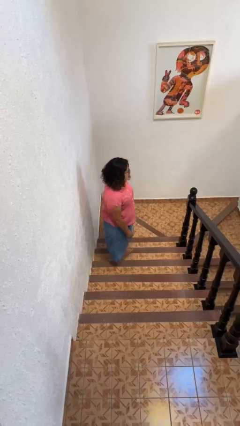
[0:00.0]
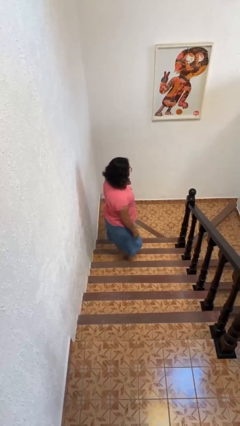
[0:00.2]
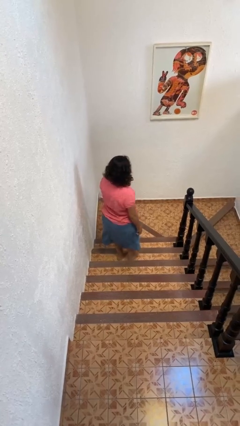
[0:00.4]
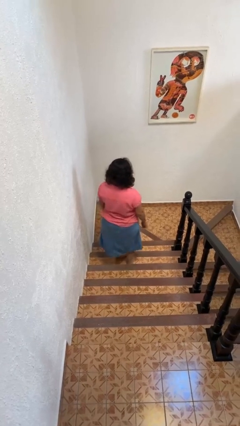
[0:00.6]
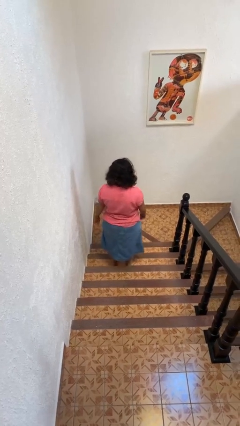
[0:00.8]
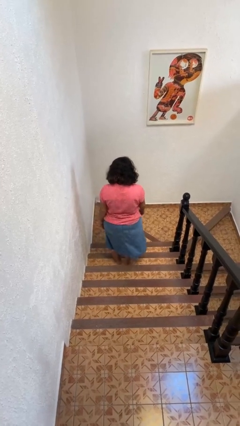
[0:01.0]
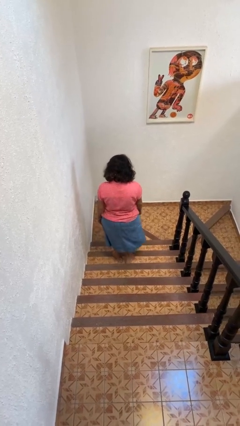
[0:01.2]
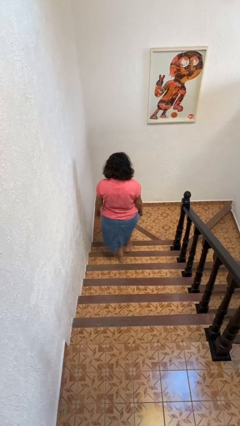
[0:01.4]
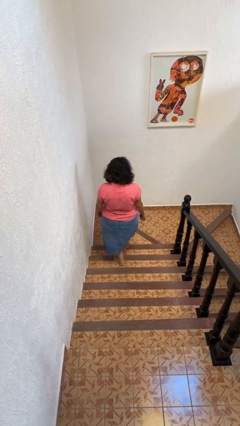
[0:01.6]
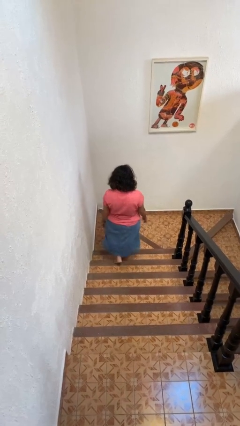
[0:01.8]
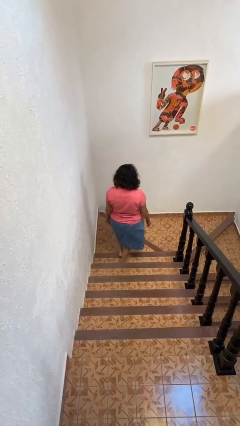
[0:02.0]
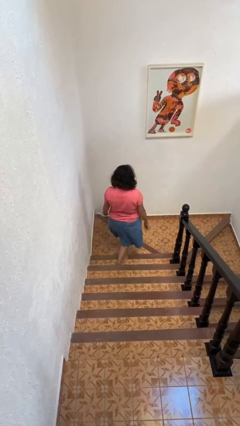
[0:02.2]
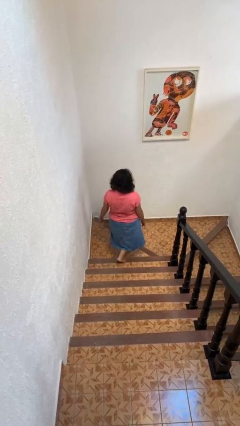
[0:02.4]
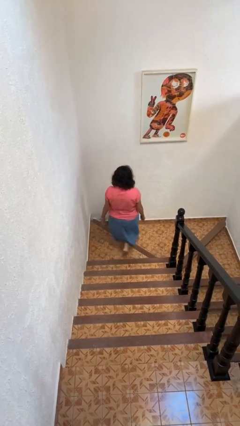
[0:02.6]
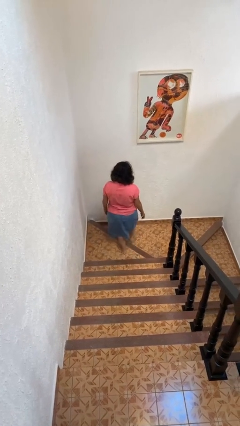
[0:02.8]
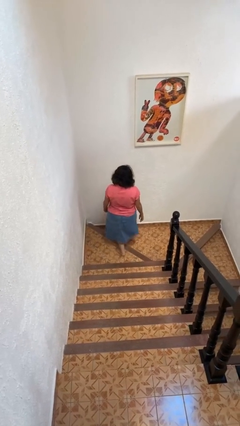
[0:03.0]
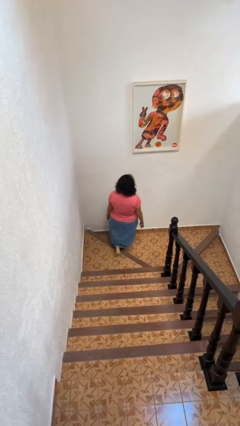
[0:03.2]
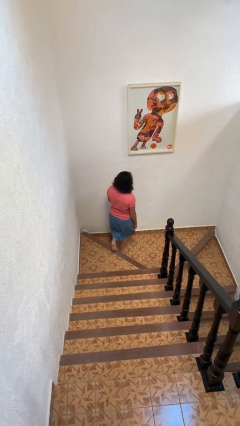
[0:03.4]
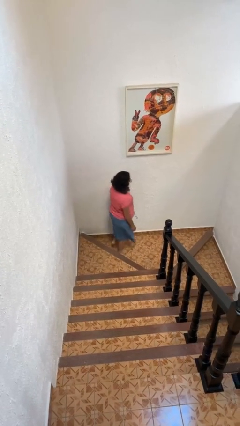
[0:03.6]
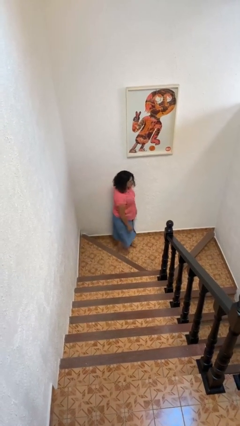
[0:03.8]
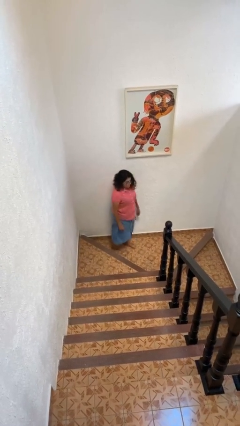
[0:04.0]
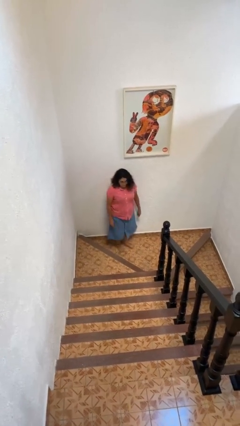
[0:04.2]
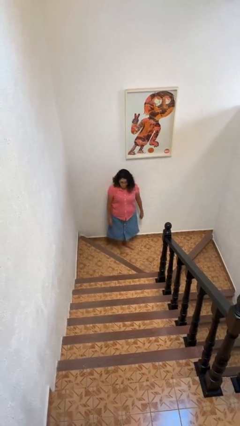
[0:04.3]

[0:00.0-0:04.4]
person climbs down stairs

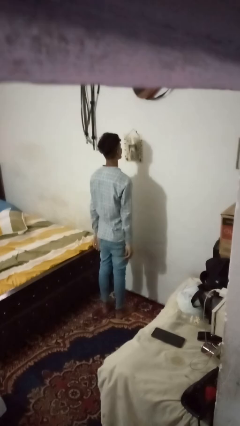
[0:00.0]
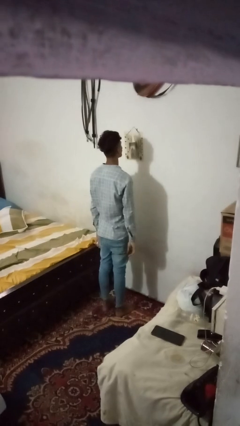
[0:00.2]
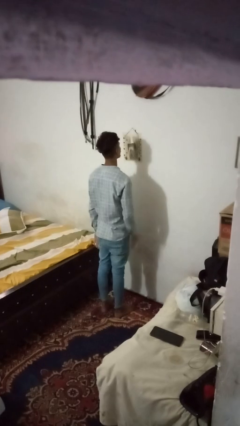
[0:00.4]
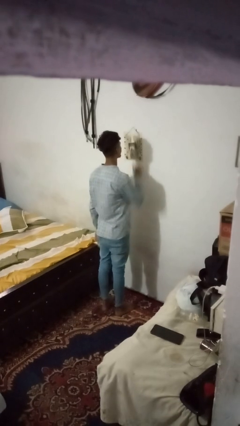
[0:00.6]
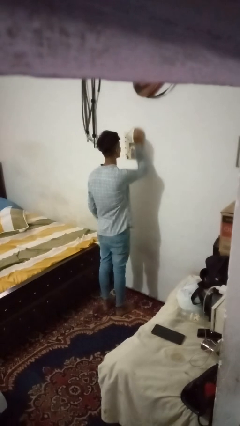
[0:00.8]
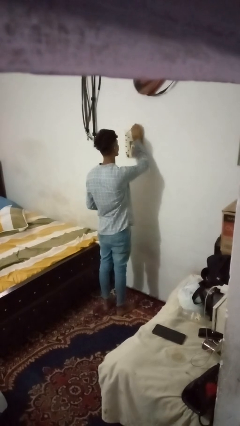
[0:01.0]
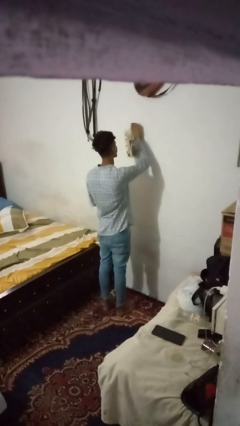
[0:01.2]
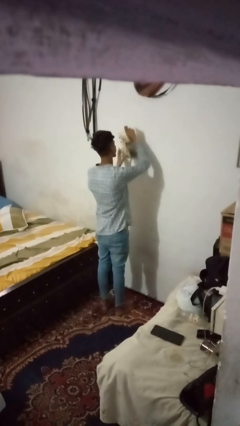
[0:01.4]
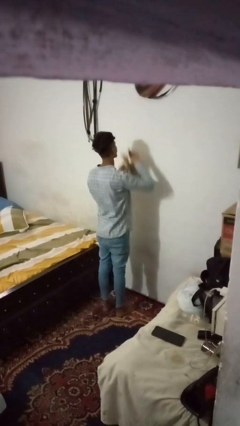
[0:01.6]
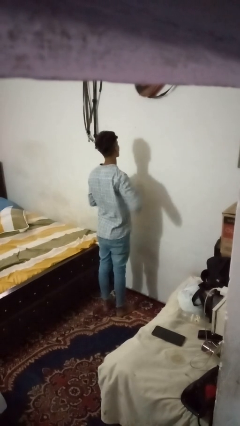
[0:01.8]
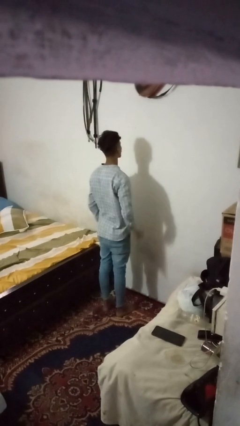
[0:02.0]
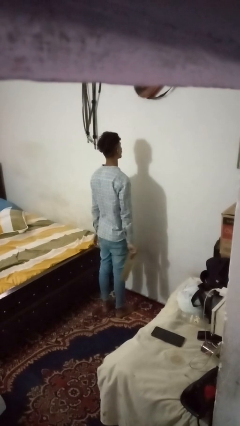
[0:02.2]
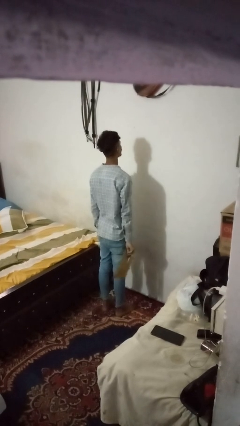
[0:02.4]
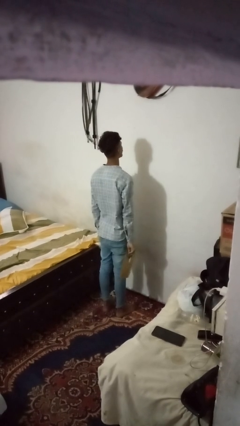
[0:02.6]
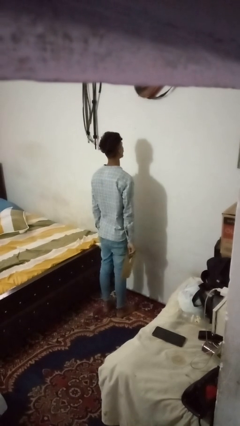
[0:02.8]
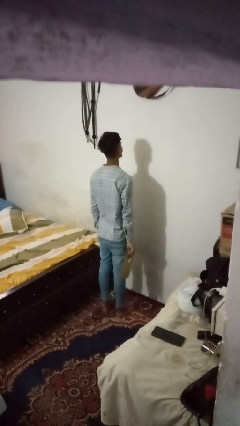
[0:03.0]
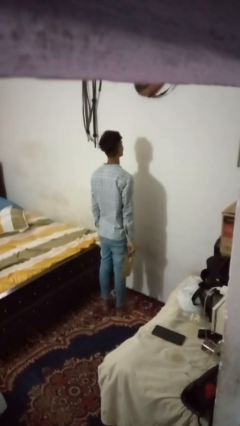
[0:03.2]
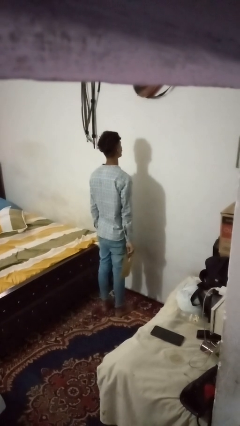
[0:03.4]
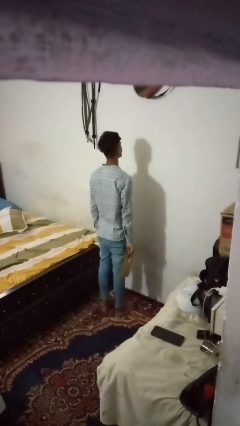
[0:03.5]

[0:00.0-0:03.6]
person takes down picture frame

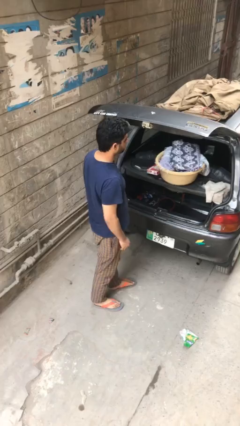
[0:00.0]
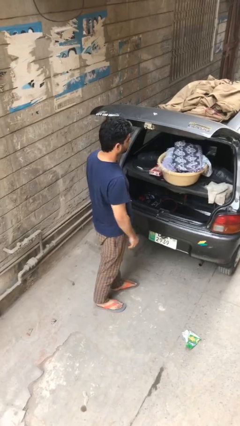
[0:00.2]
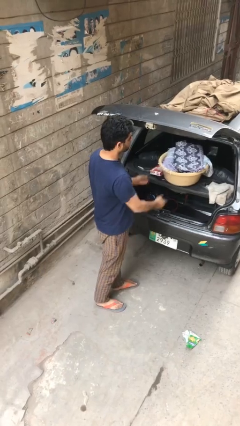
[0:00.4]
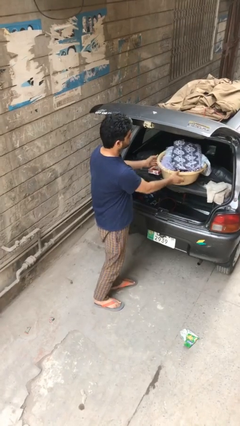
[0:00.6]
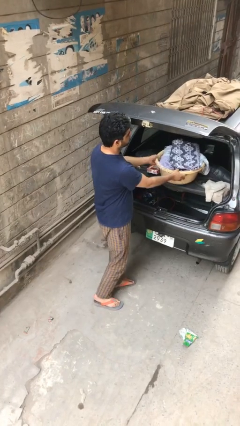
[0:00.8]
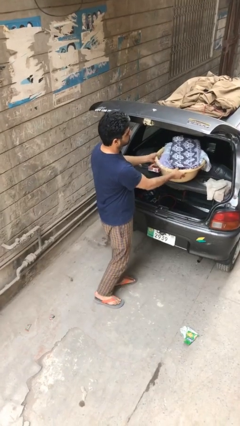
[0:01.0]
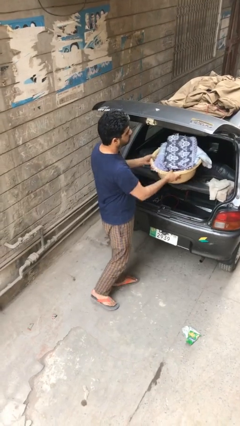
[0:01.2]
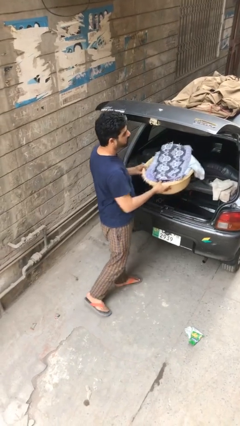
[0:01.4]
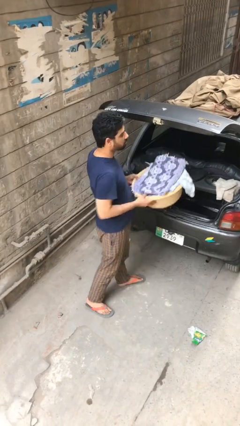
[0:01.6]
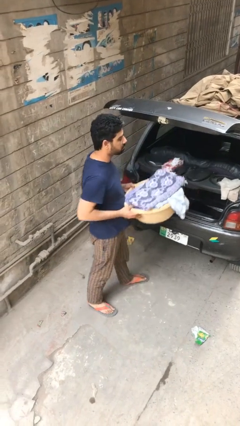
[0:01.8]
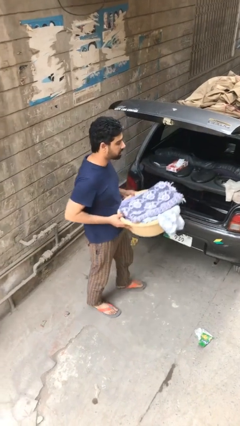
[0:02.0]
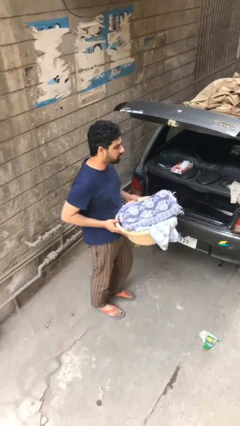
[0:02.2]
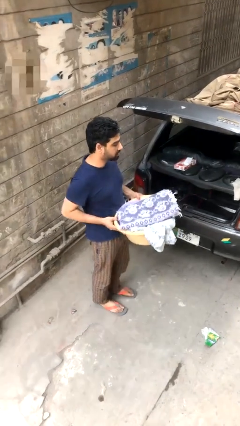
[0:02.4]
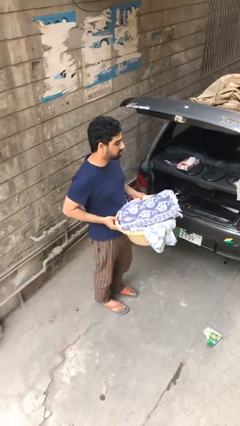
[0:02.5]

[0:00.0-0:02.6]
person unloads car

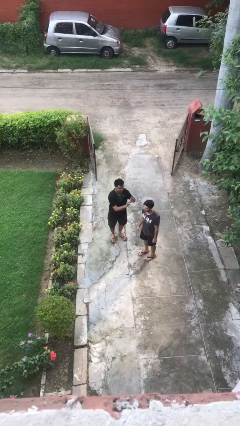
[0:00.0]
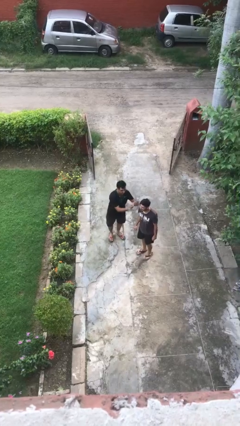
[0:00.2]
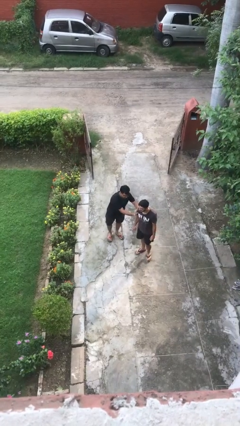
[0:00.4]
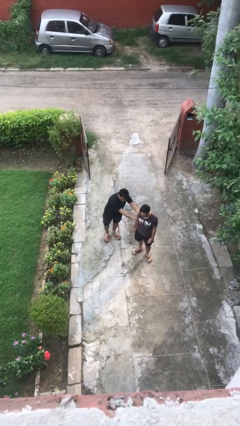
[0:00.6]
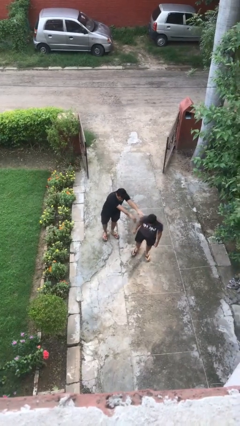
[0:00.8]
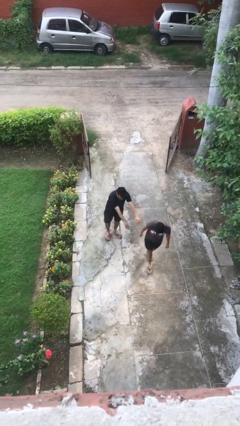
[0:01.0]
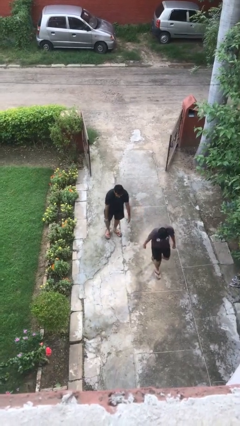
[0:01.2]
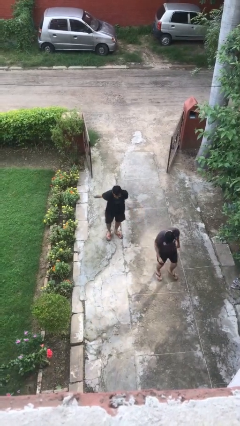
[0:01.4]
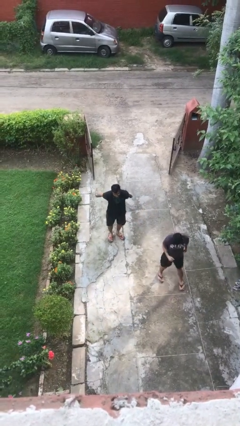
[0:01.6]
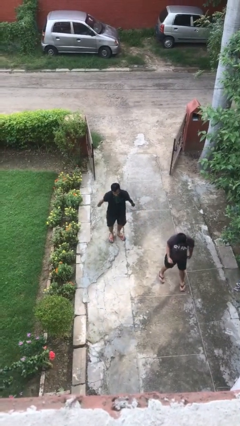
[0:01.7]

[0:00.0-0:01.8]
person shoves person

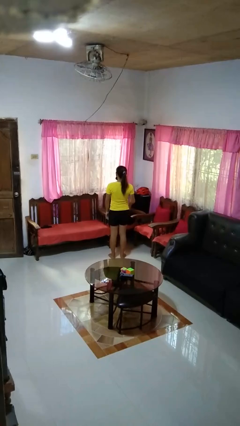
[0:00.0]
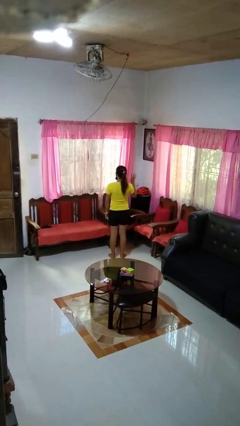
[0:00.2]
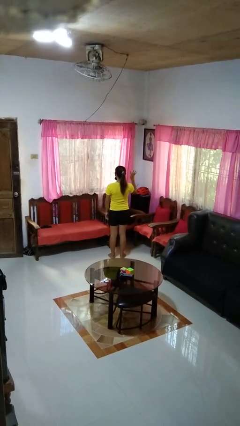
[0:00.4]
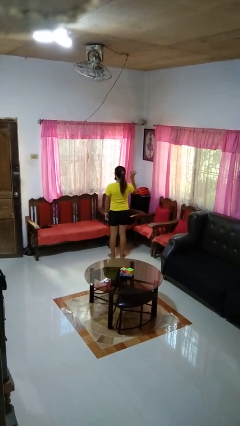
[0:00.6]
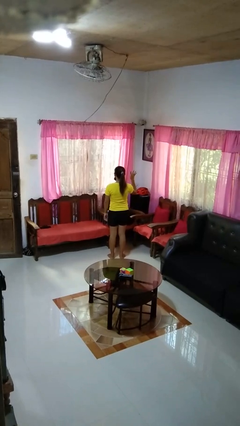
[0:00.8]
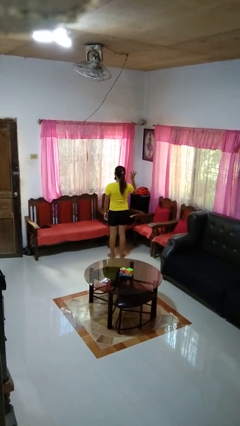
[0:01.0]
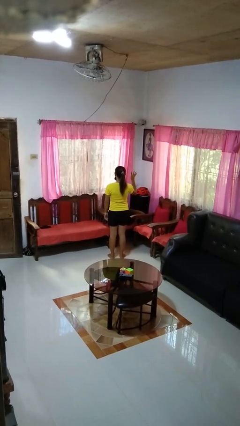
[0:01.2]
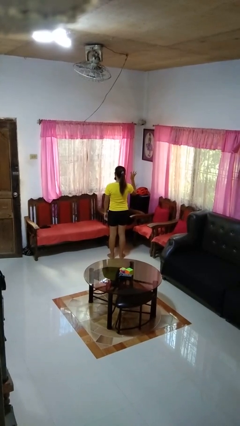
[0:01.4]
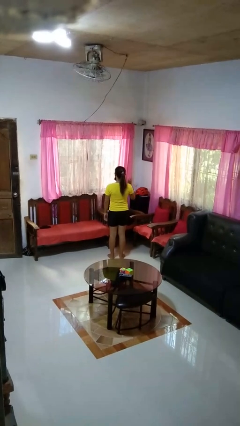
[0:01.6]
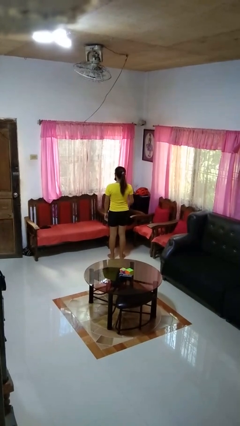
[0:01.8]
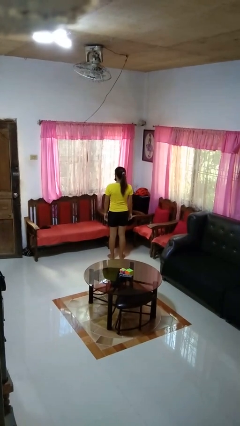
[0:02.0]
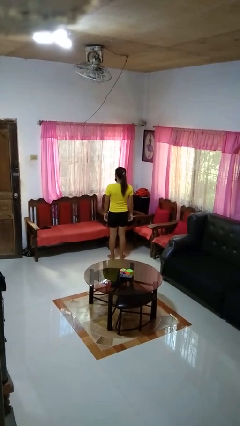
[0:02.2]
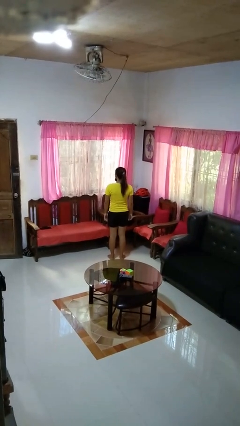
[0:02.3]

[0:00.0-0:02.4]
person gestures number four

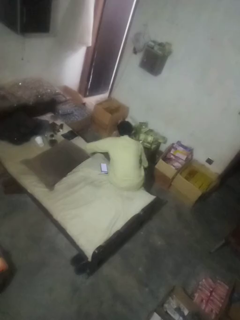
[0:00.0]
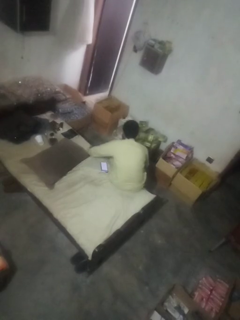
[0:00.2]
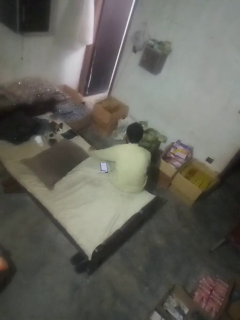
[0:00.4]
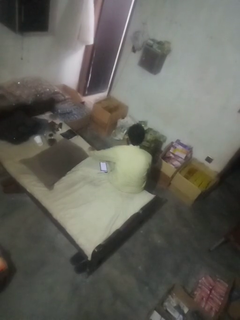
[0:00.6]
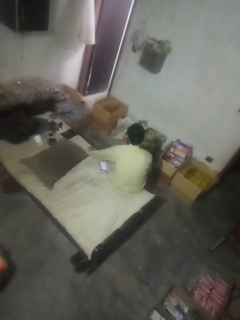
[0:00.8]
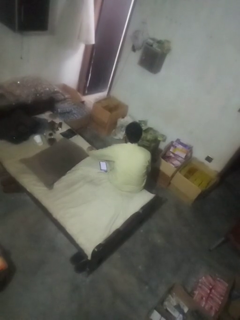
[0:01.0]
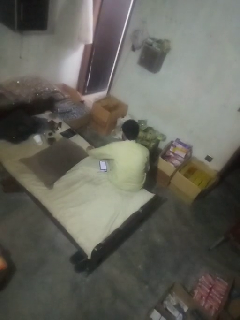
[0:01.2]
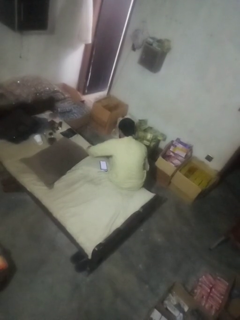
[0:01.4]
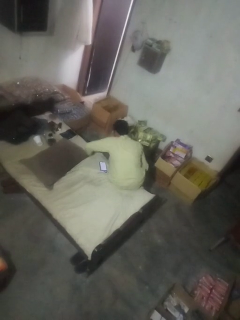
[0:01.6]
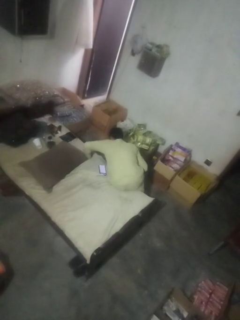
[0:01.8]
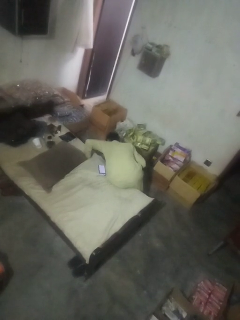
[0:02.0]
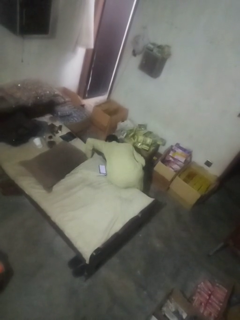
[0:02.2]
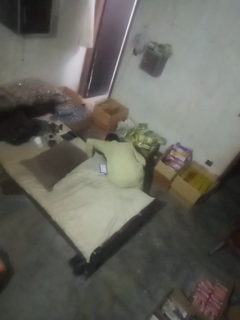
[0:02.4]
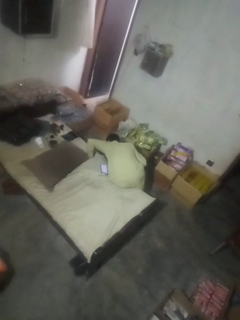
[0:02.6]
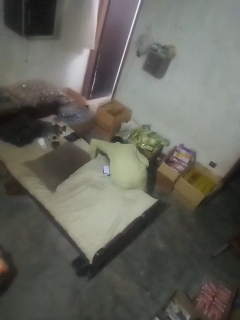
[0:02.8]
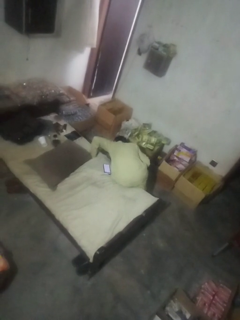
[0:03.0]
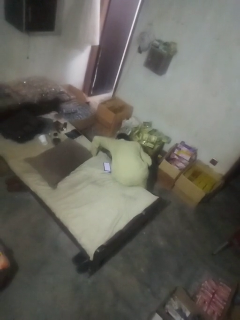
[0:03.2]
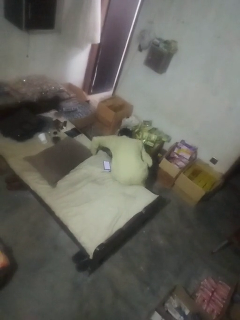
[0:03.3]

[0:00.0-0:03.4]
person searches under couch
